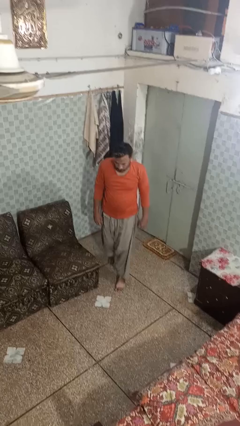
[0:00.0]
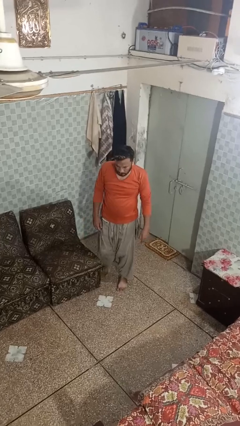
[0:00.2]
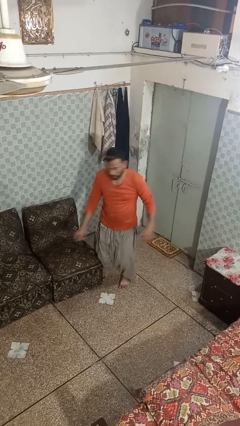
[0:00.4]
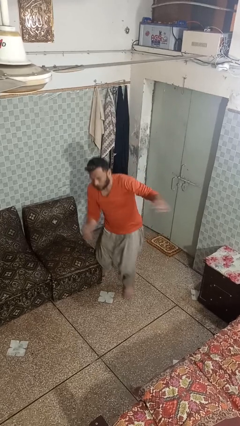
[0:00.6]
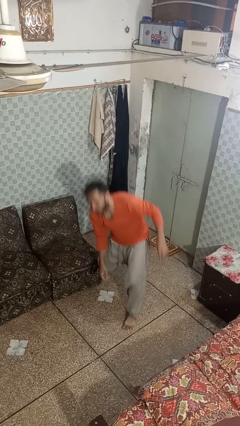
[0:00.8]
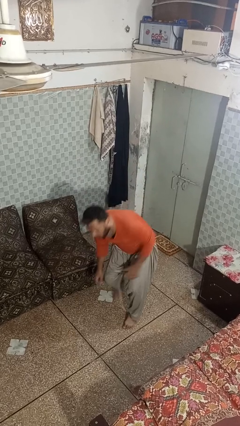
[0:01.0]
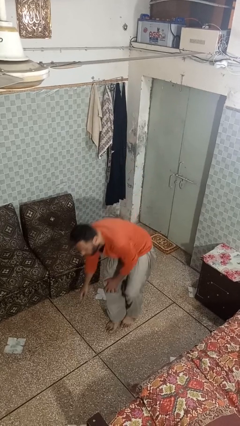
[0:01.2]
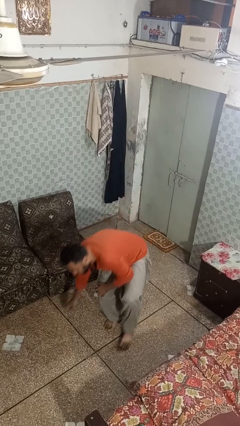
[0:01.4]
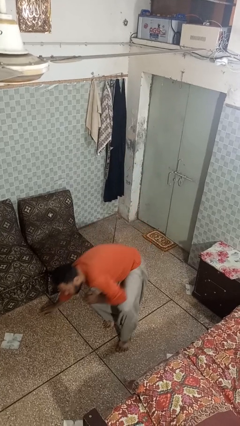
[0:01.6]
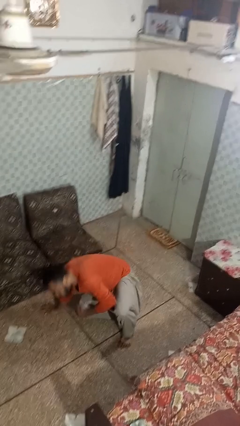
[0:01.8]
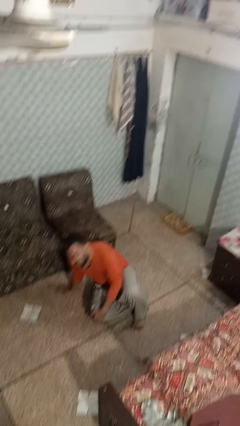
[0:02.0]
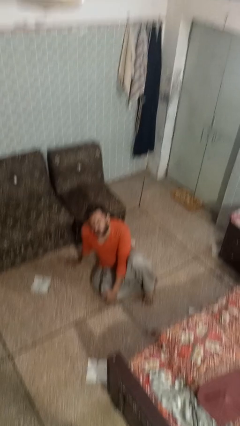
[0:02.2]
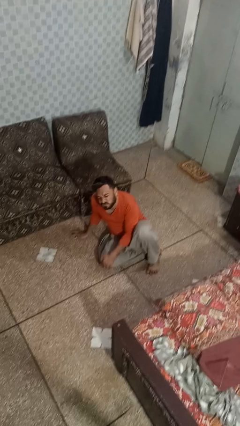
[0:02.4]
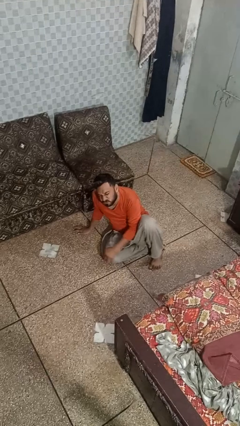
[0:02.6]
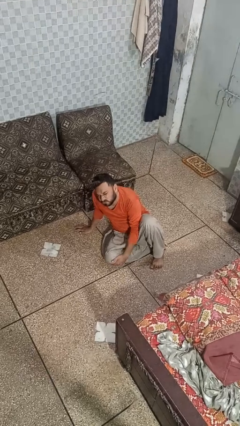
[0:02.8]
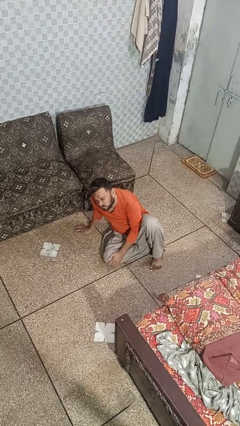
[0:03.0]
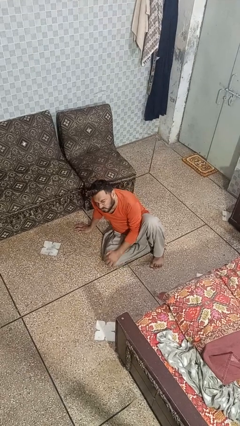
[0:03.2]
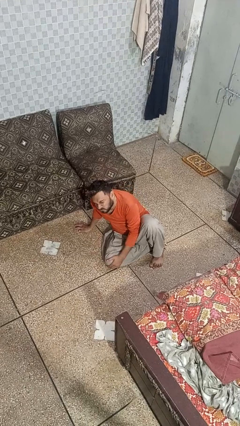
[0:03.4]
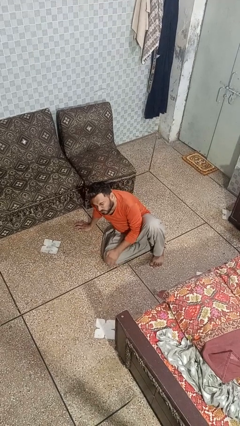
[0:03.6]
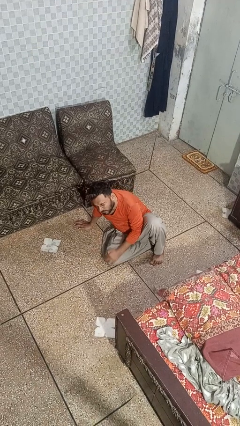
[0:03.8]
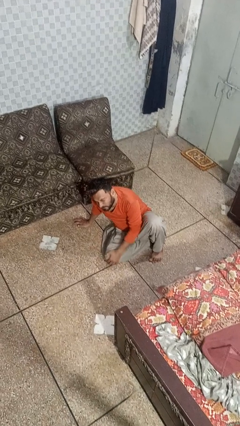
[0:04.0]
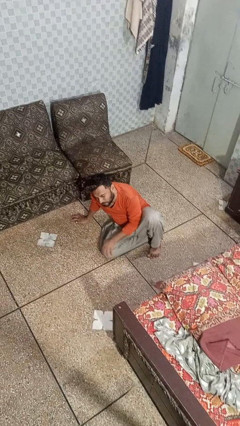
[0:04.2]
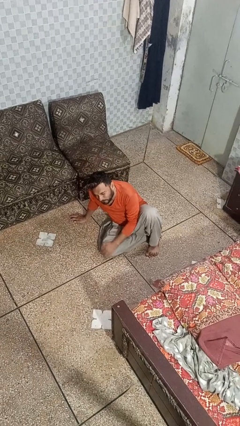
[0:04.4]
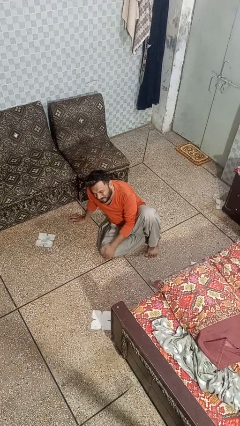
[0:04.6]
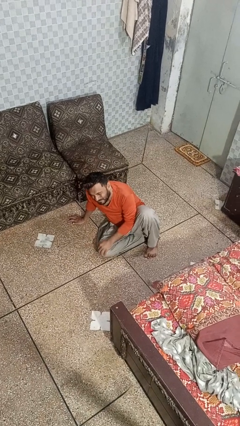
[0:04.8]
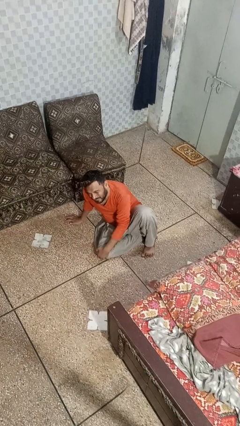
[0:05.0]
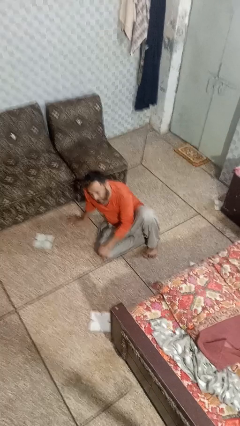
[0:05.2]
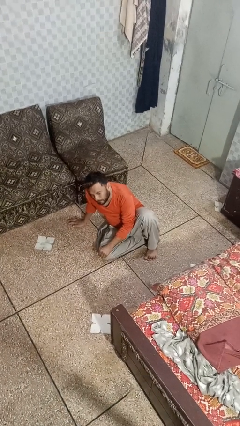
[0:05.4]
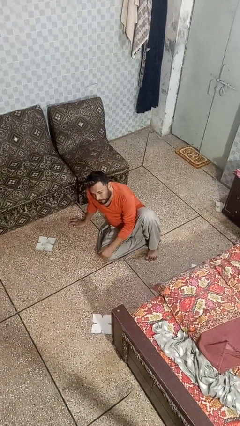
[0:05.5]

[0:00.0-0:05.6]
person trips on object on floor

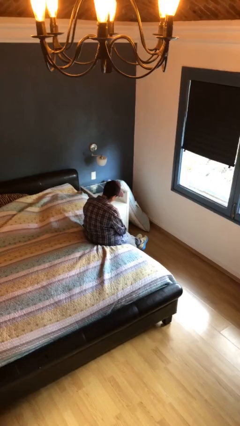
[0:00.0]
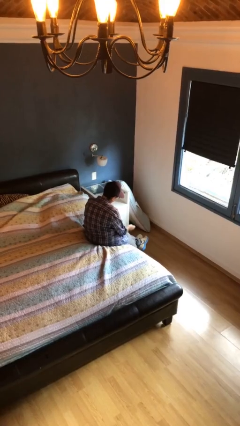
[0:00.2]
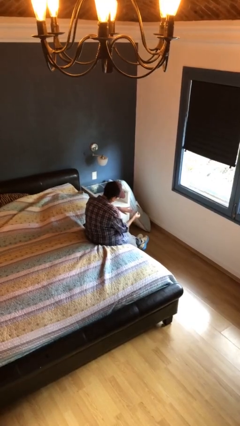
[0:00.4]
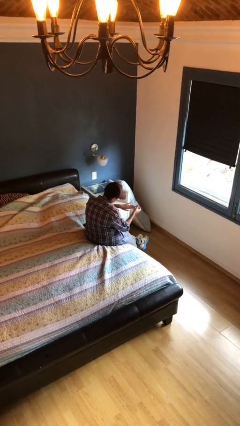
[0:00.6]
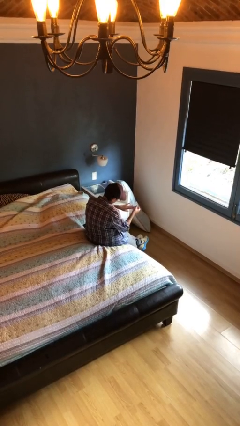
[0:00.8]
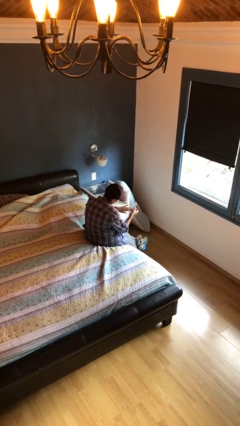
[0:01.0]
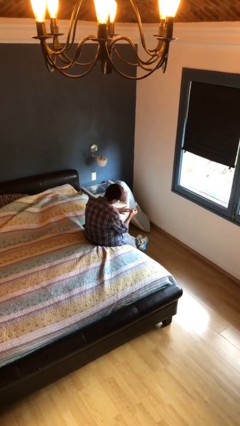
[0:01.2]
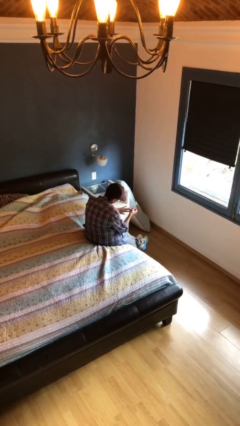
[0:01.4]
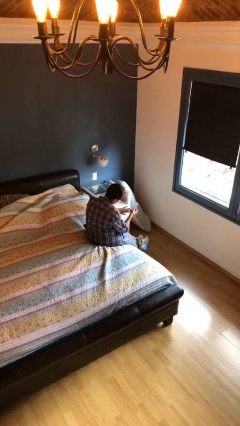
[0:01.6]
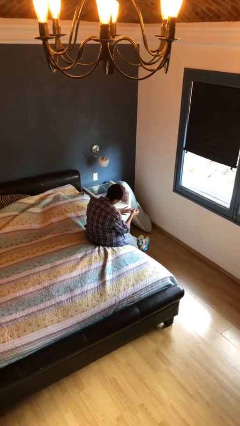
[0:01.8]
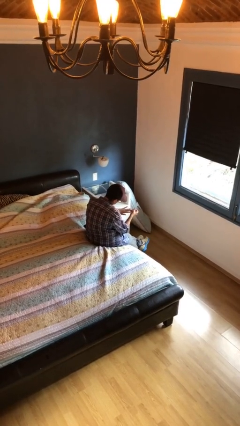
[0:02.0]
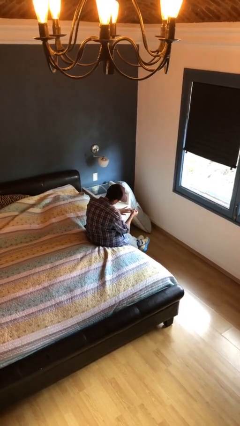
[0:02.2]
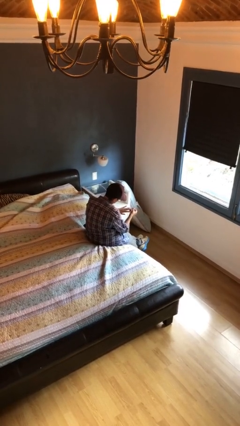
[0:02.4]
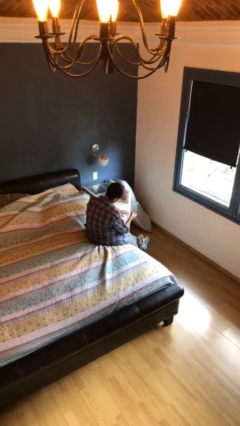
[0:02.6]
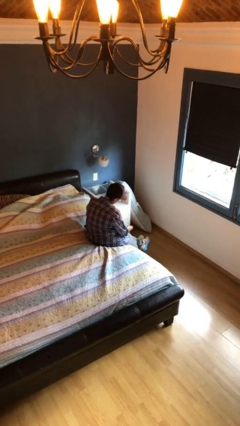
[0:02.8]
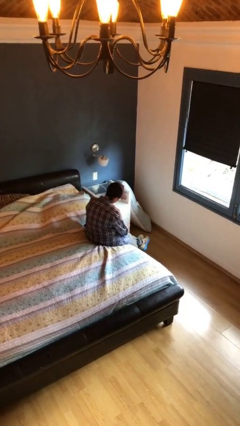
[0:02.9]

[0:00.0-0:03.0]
person clips fingernails

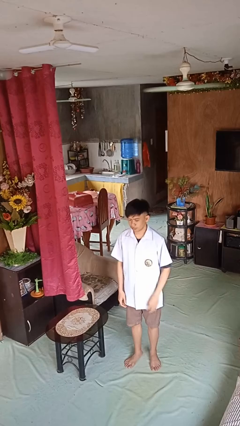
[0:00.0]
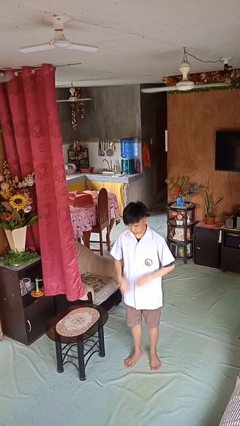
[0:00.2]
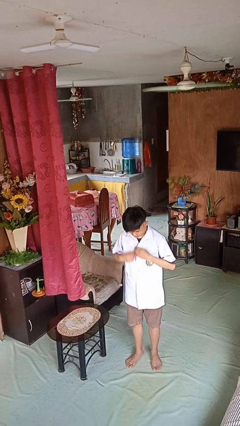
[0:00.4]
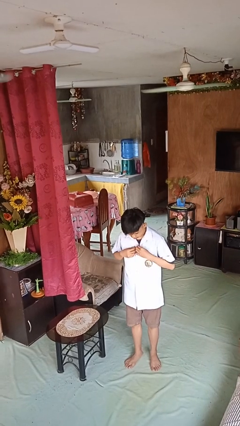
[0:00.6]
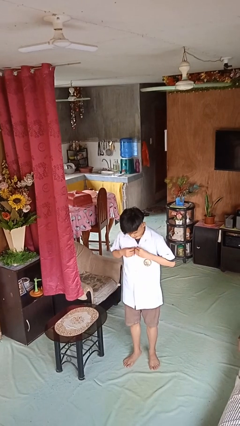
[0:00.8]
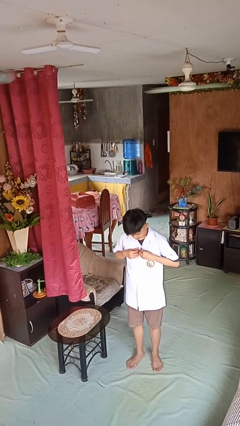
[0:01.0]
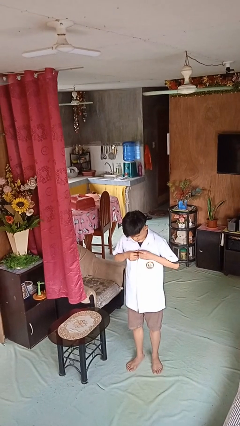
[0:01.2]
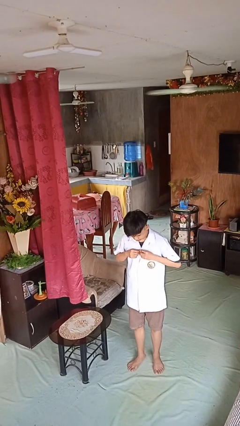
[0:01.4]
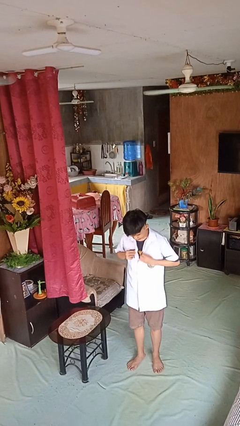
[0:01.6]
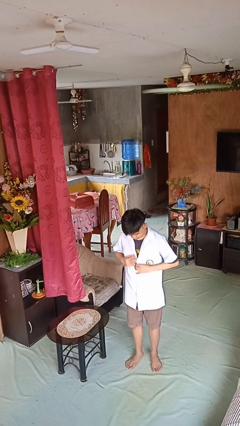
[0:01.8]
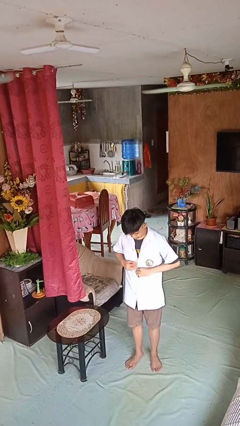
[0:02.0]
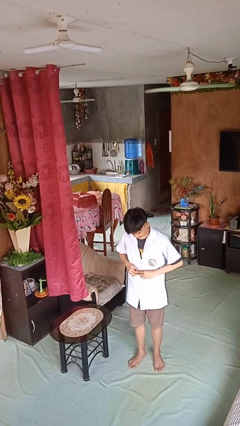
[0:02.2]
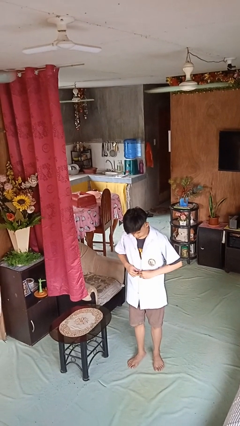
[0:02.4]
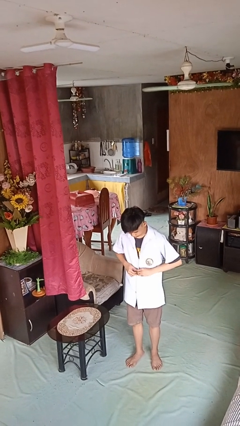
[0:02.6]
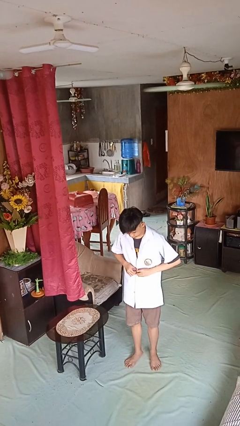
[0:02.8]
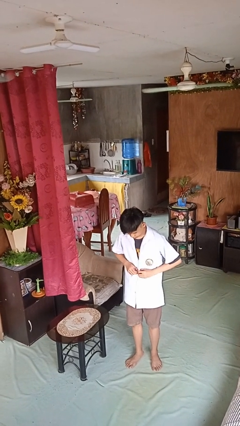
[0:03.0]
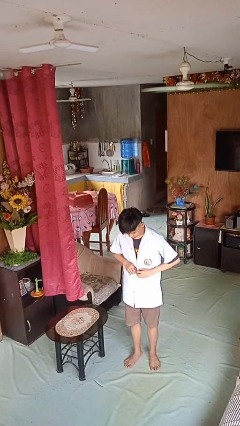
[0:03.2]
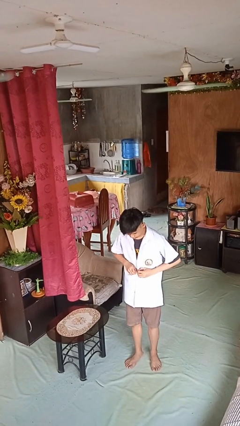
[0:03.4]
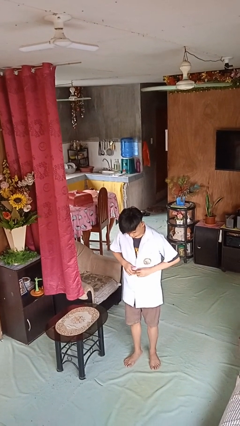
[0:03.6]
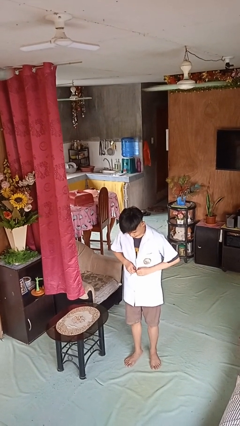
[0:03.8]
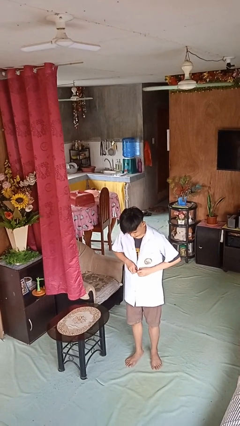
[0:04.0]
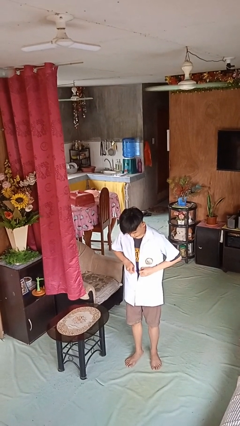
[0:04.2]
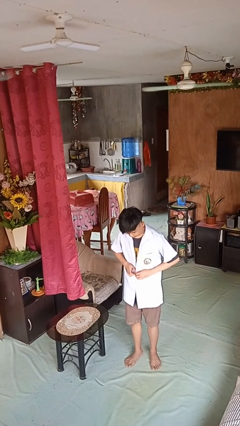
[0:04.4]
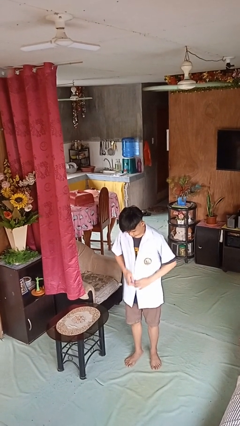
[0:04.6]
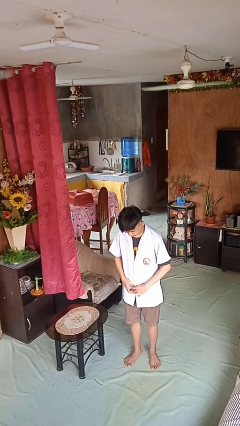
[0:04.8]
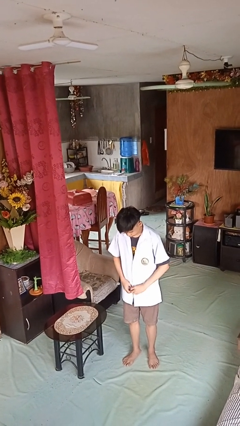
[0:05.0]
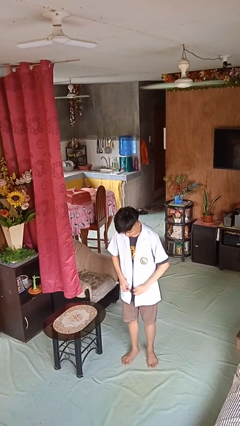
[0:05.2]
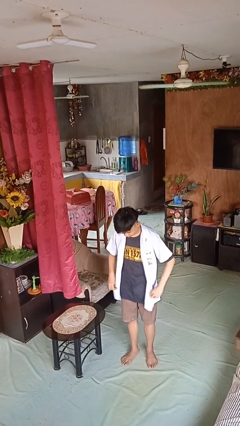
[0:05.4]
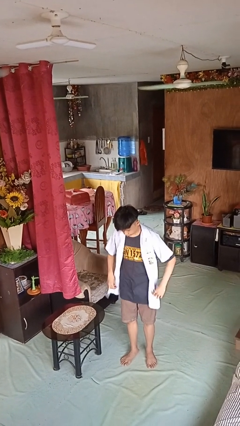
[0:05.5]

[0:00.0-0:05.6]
person unbuttons shirt

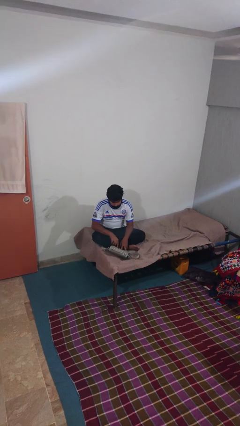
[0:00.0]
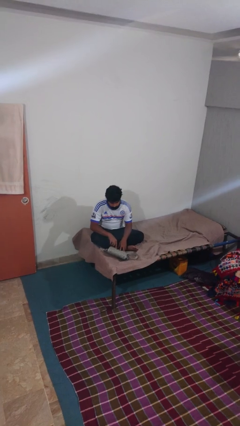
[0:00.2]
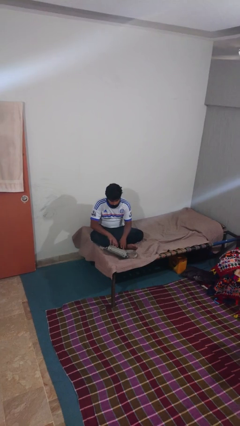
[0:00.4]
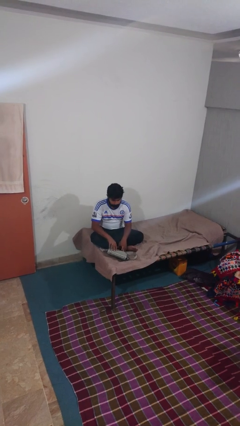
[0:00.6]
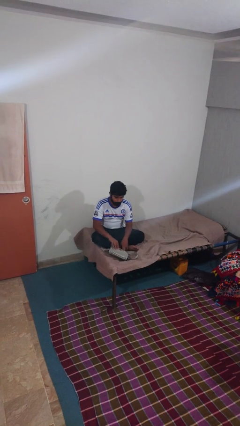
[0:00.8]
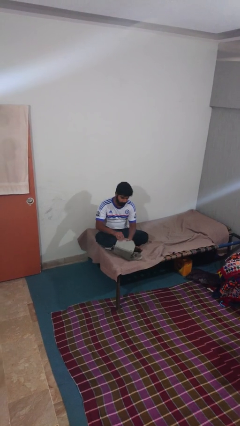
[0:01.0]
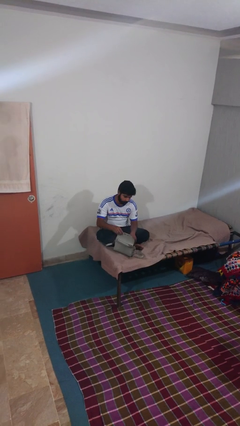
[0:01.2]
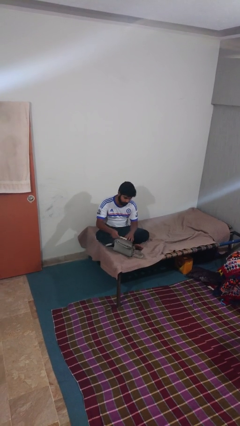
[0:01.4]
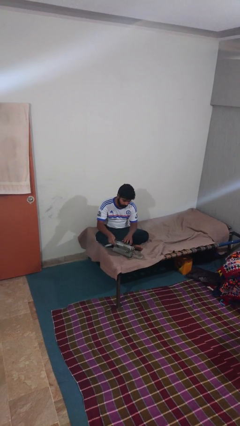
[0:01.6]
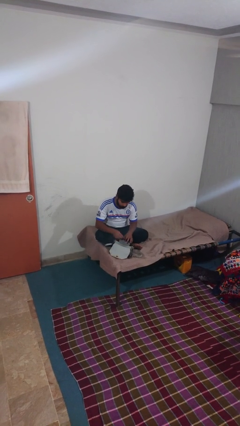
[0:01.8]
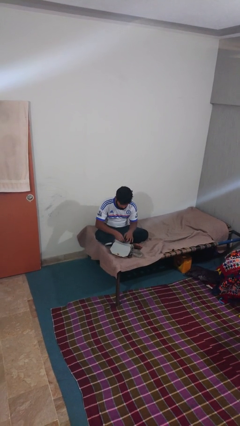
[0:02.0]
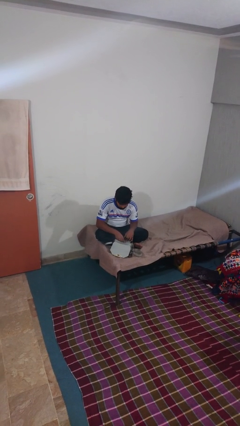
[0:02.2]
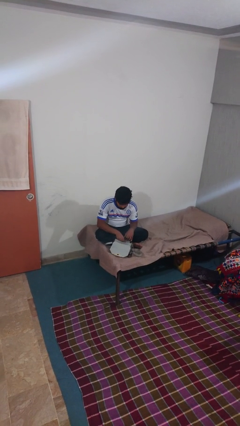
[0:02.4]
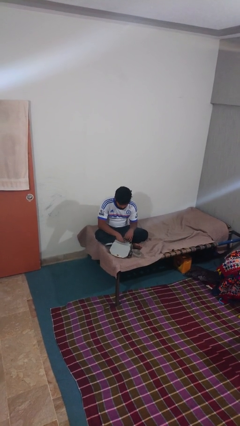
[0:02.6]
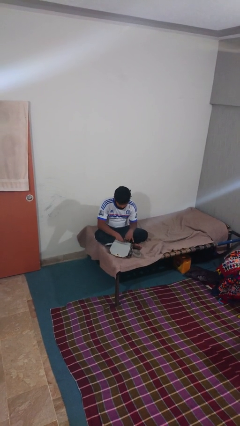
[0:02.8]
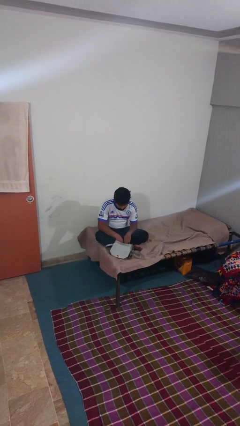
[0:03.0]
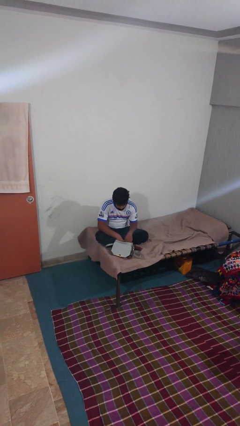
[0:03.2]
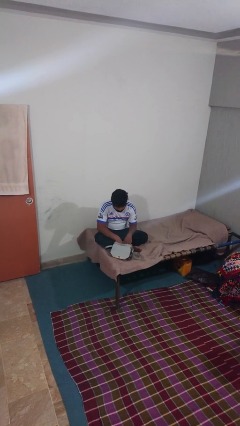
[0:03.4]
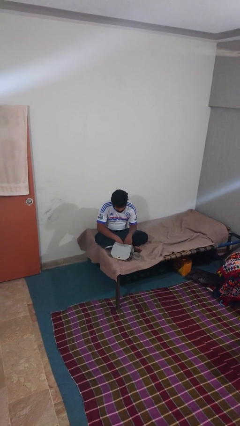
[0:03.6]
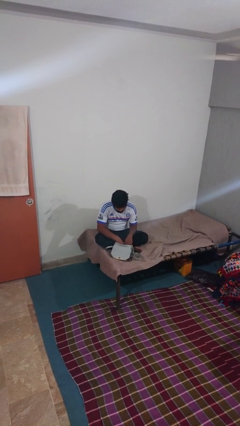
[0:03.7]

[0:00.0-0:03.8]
person searches in purse
